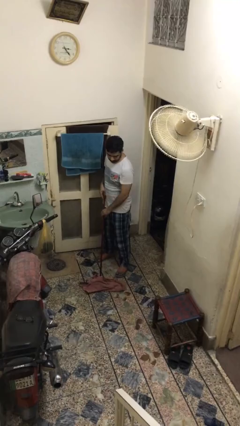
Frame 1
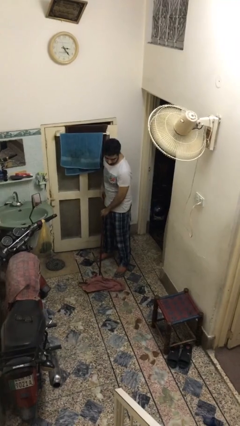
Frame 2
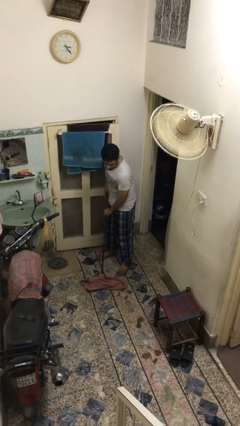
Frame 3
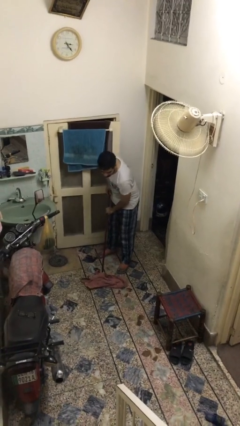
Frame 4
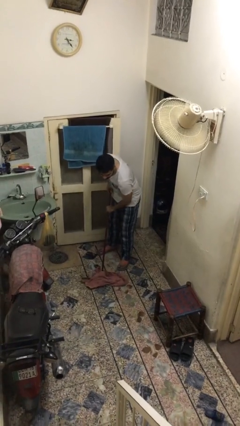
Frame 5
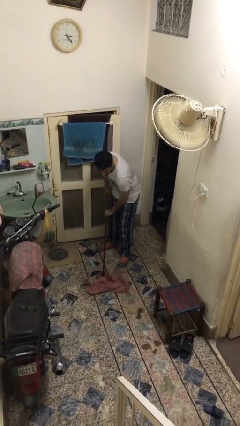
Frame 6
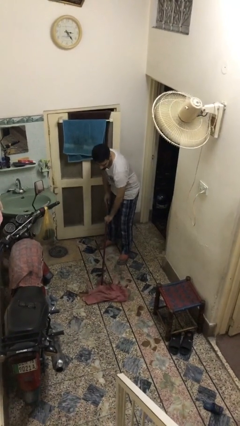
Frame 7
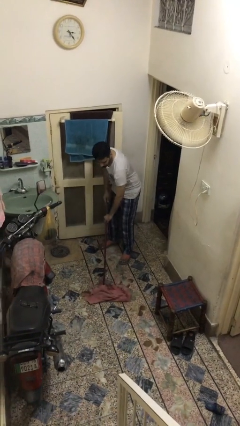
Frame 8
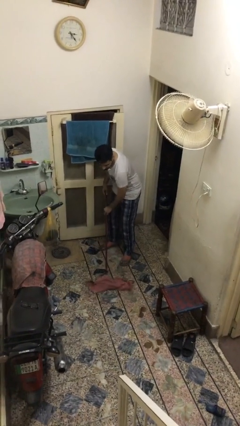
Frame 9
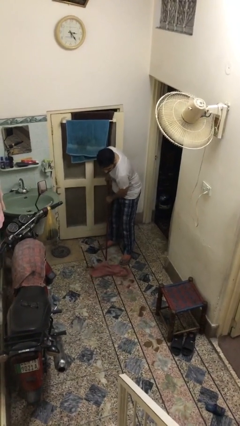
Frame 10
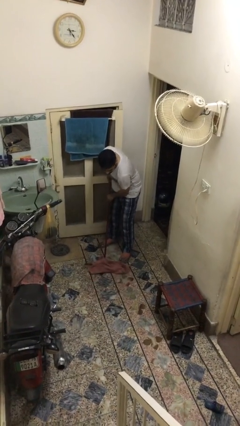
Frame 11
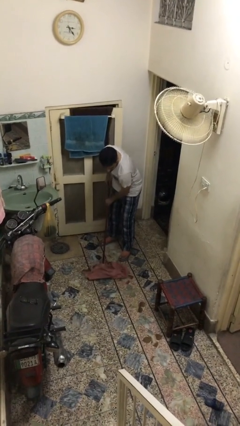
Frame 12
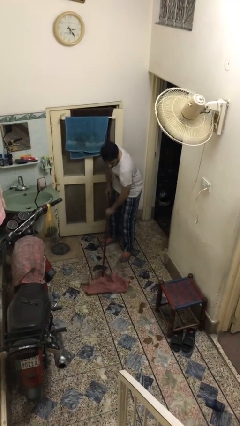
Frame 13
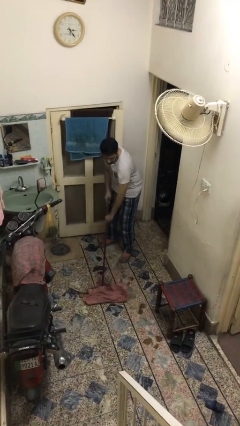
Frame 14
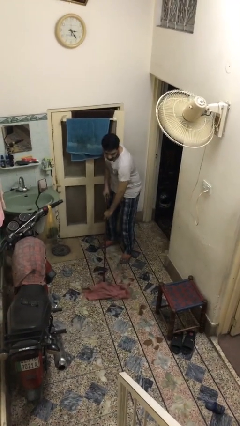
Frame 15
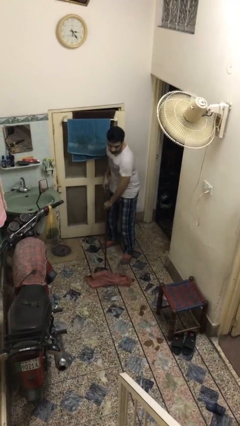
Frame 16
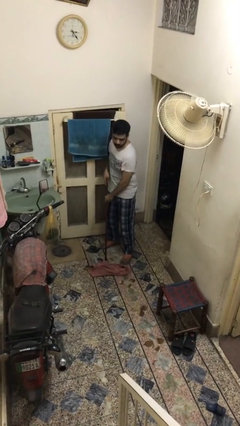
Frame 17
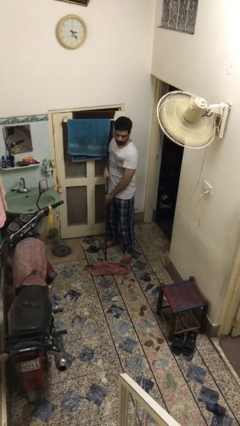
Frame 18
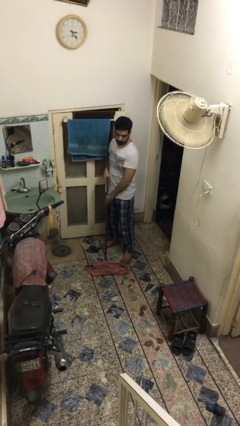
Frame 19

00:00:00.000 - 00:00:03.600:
person mops

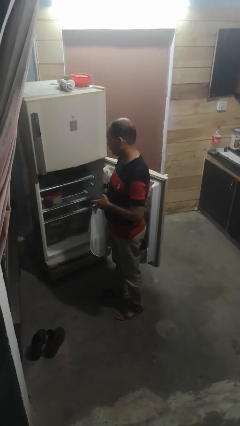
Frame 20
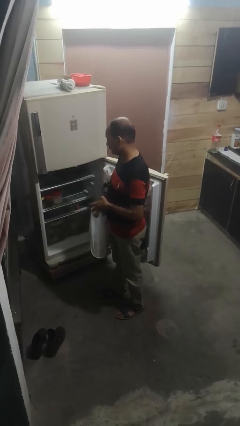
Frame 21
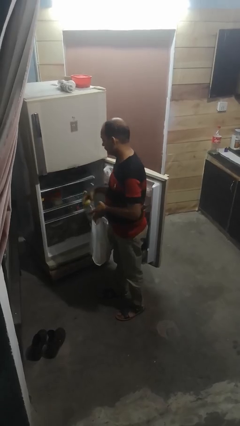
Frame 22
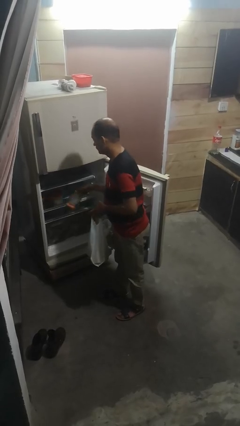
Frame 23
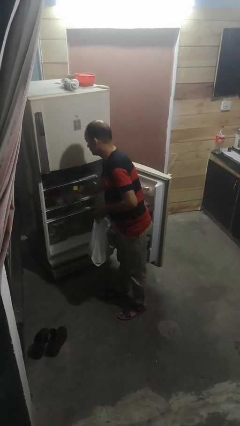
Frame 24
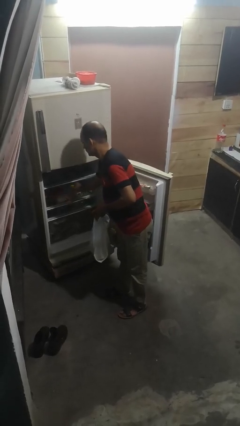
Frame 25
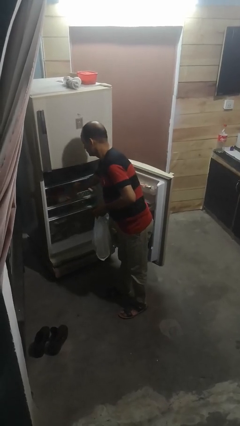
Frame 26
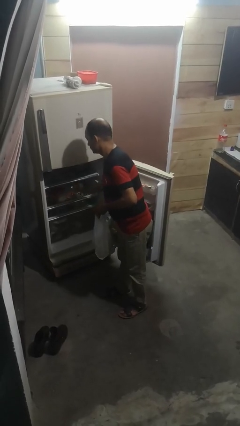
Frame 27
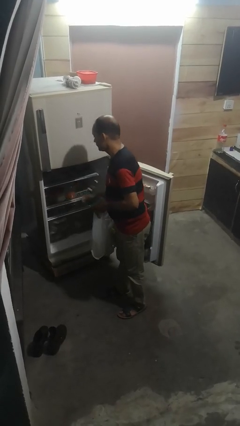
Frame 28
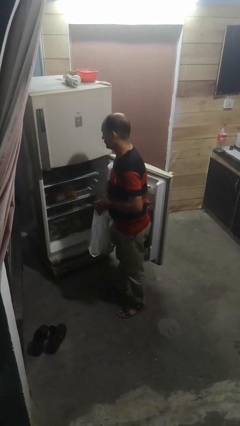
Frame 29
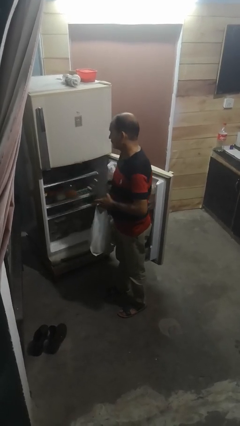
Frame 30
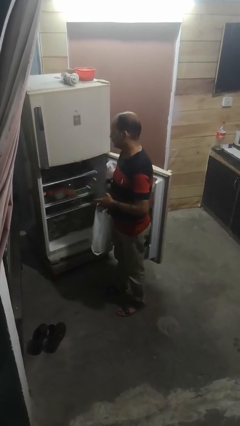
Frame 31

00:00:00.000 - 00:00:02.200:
person loads groceries into refrigerator

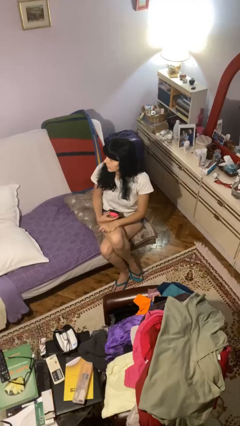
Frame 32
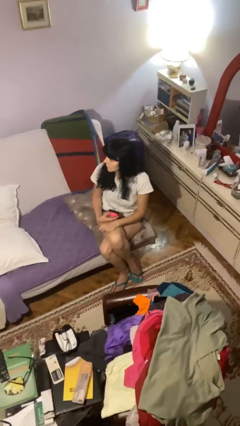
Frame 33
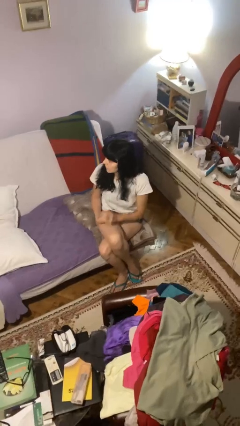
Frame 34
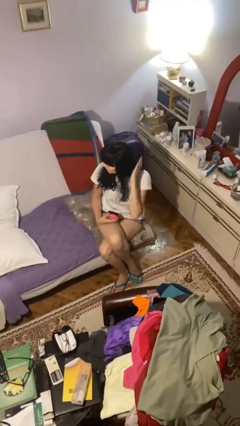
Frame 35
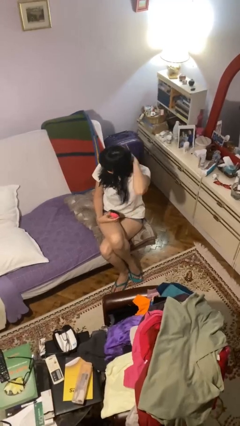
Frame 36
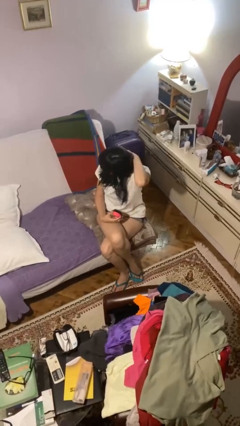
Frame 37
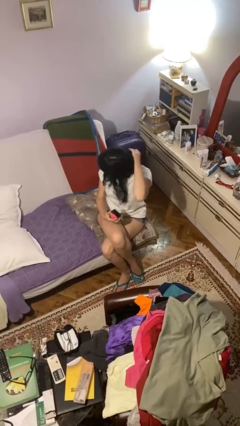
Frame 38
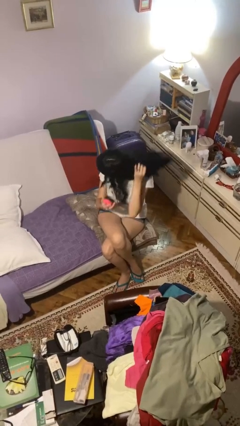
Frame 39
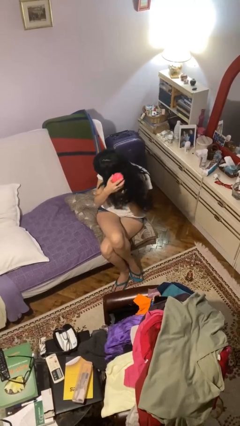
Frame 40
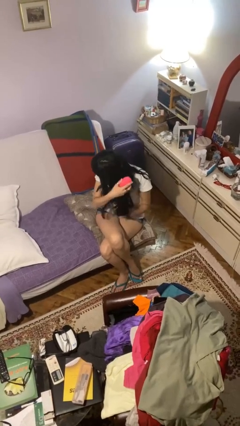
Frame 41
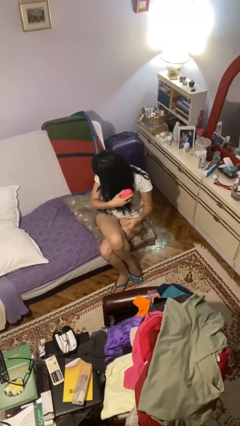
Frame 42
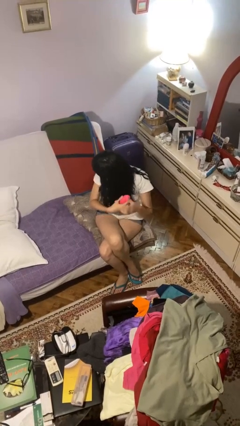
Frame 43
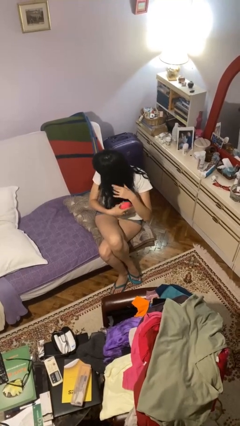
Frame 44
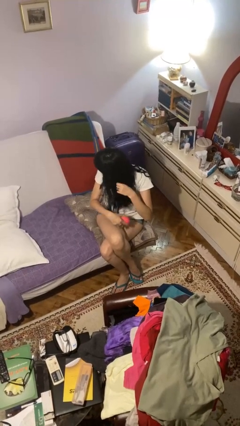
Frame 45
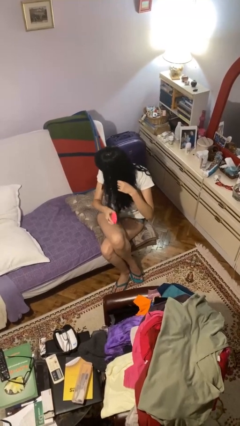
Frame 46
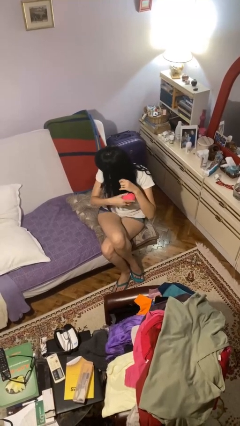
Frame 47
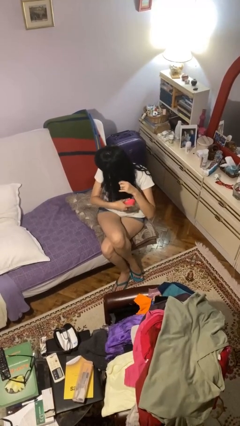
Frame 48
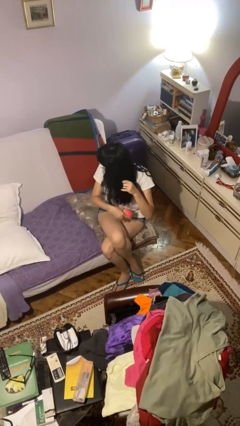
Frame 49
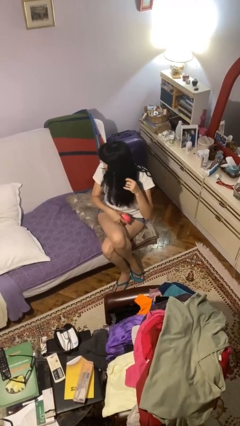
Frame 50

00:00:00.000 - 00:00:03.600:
person brushes hair

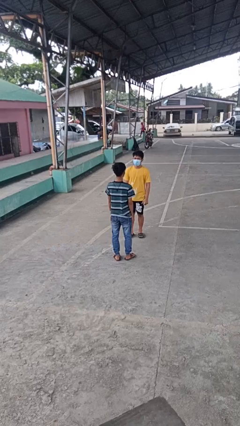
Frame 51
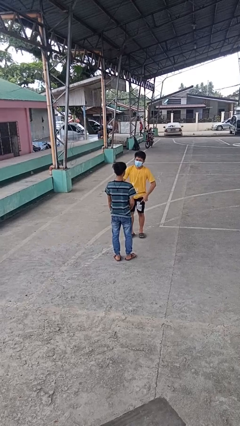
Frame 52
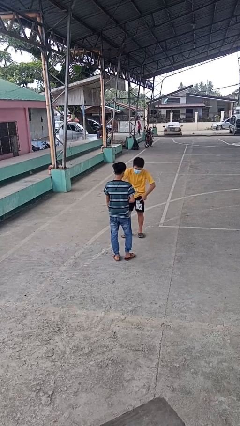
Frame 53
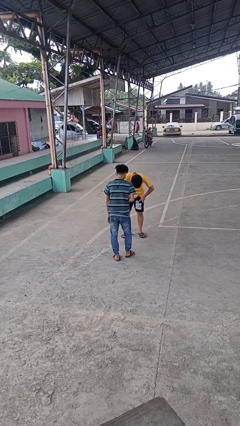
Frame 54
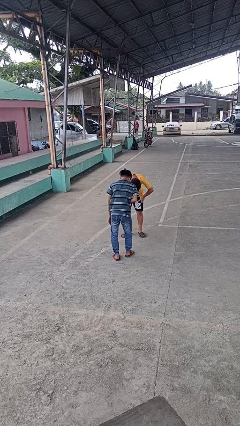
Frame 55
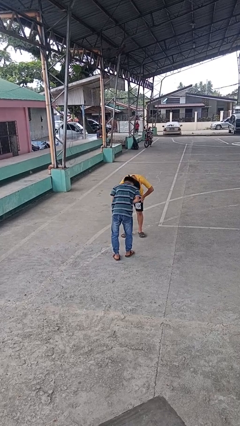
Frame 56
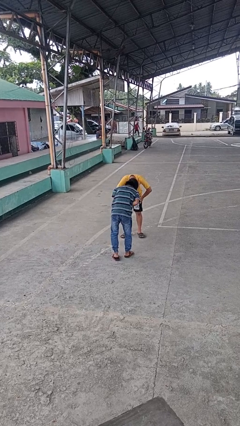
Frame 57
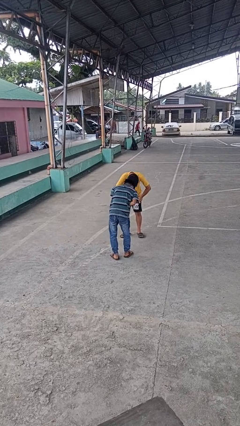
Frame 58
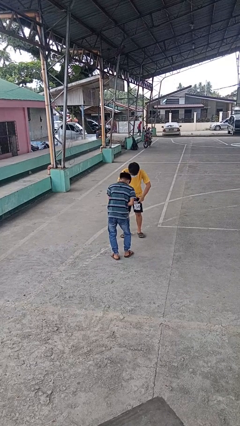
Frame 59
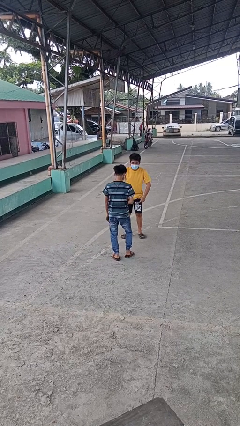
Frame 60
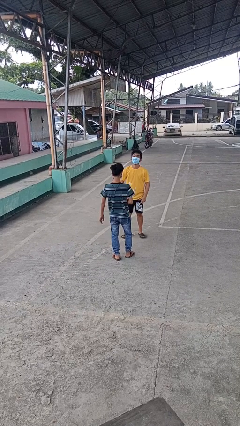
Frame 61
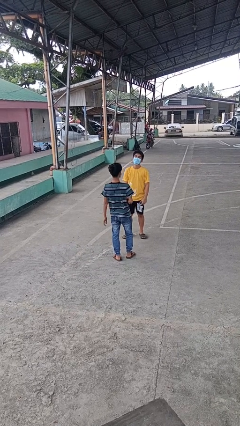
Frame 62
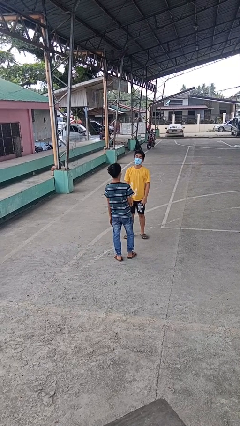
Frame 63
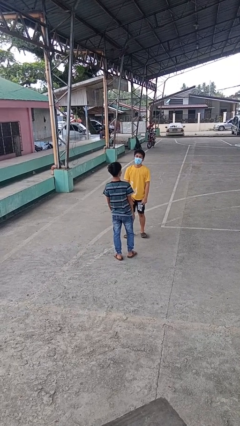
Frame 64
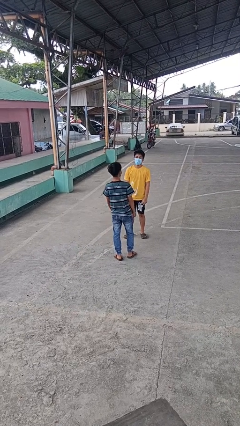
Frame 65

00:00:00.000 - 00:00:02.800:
person laughs with person

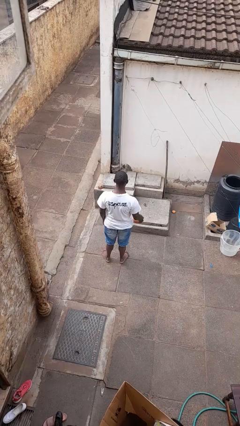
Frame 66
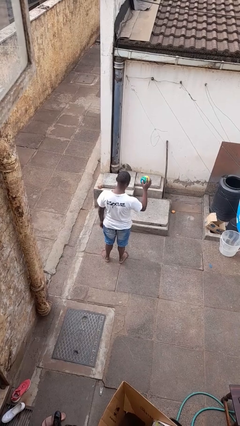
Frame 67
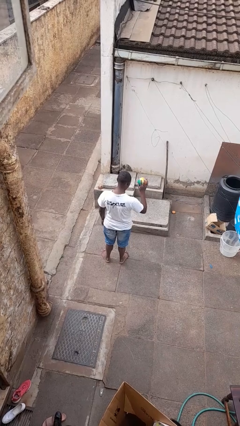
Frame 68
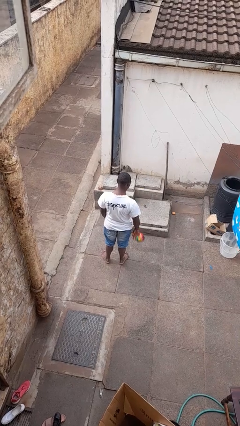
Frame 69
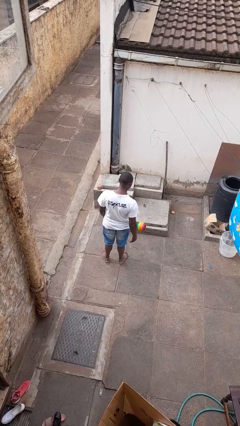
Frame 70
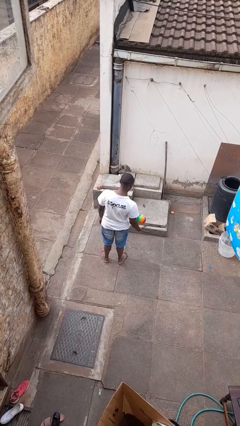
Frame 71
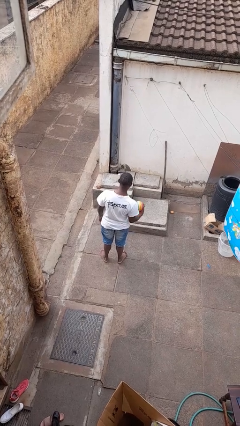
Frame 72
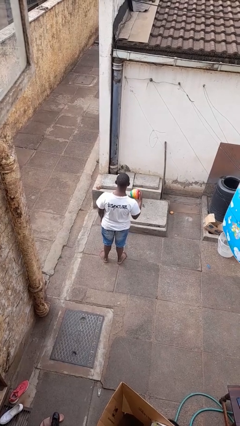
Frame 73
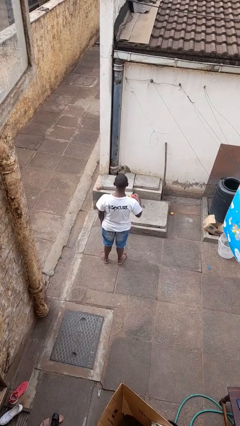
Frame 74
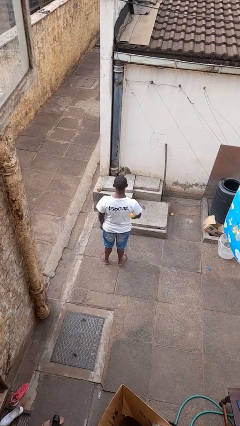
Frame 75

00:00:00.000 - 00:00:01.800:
person bounces ball on floor

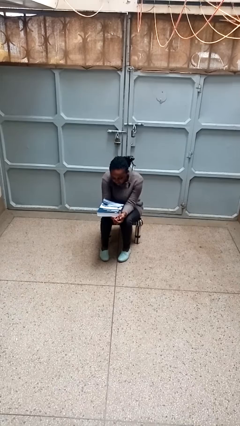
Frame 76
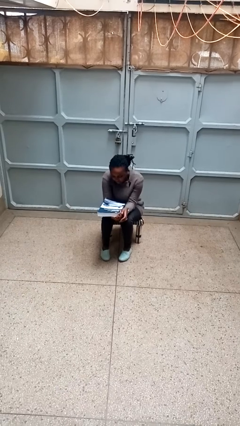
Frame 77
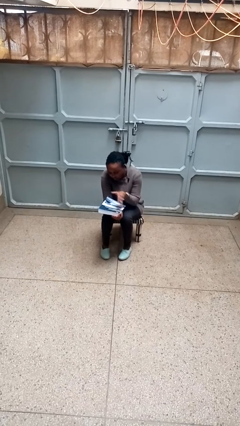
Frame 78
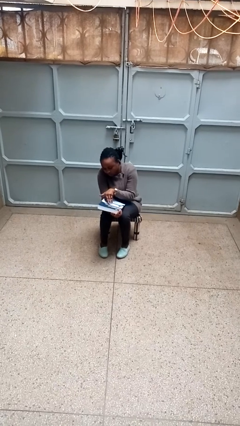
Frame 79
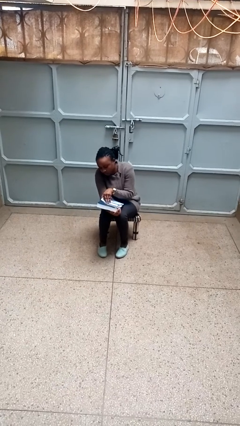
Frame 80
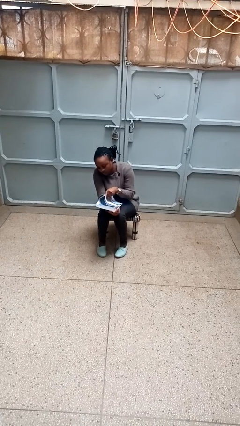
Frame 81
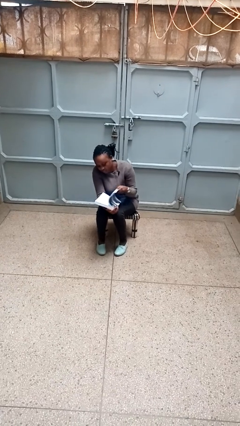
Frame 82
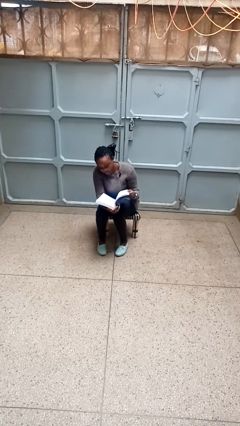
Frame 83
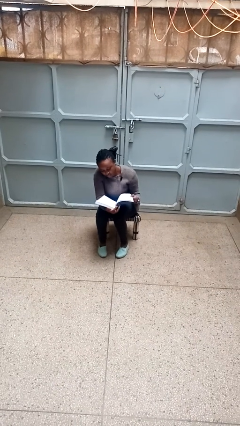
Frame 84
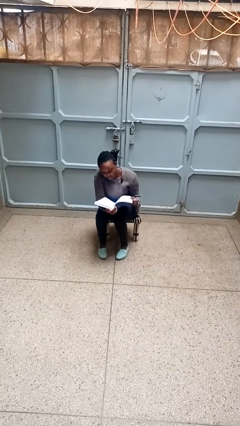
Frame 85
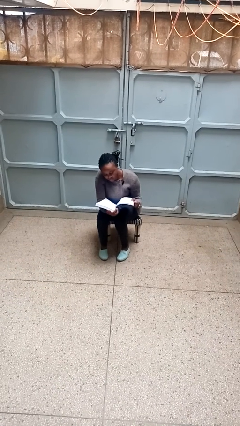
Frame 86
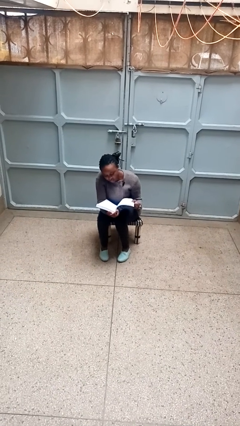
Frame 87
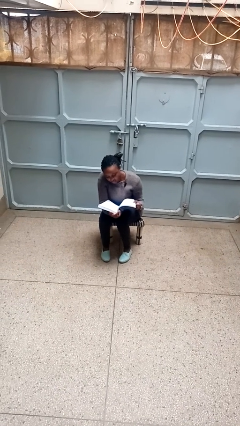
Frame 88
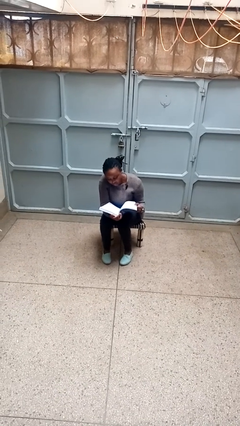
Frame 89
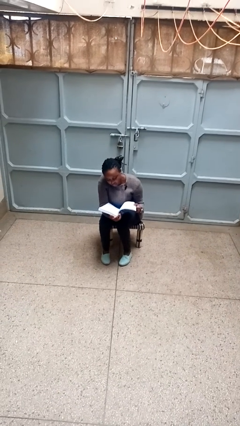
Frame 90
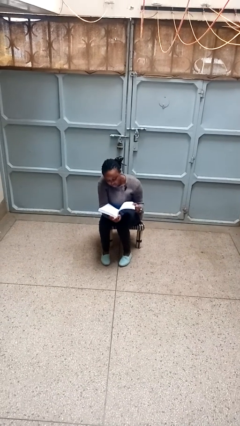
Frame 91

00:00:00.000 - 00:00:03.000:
person reads book

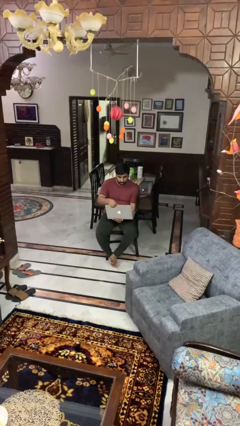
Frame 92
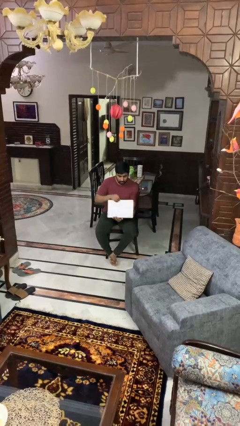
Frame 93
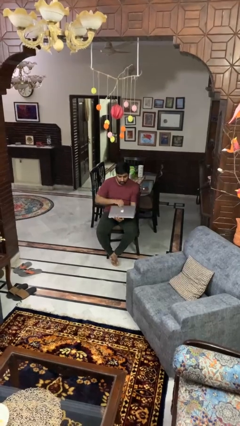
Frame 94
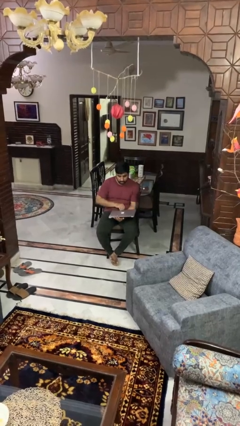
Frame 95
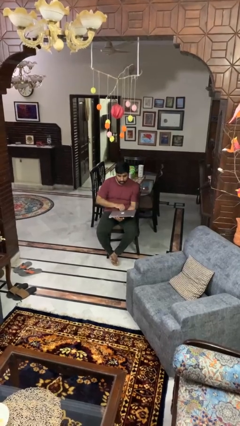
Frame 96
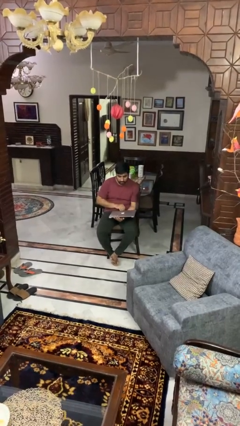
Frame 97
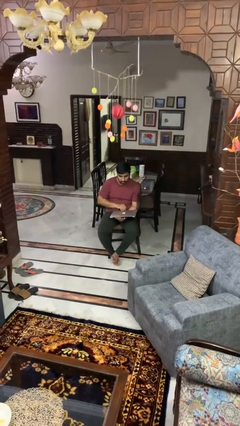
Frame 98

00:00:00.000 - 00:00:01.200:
person closes laptop
